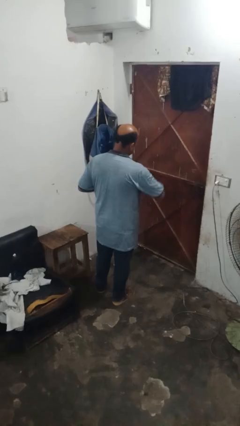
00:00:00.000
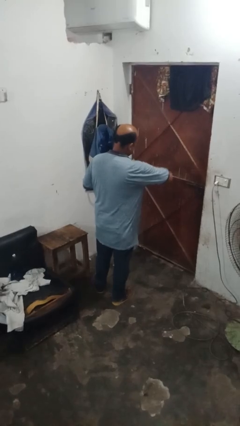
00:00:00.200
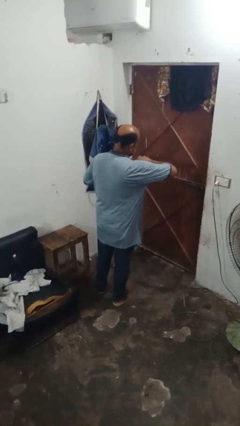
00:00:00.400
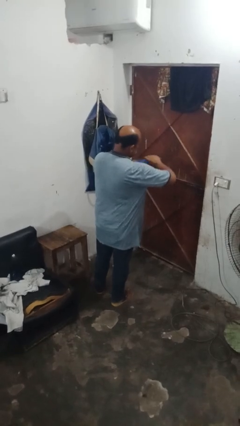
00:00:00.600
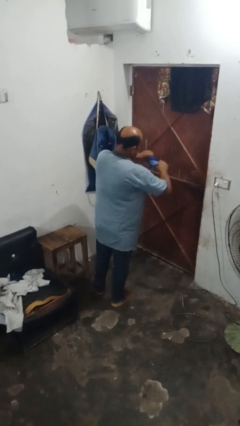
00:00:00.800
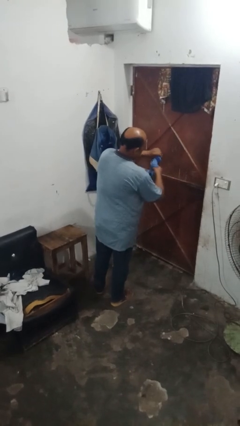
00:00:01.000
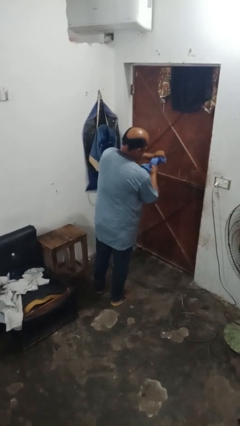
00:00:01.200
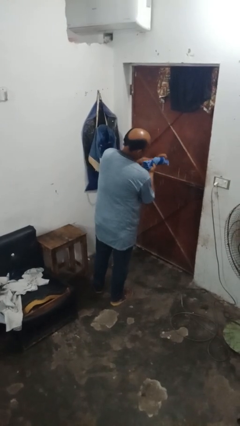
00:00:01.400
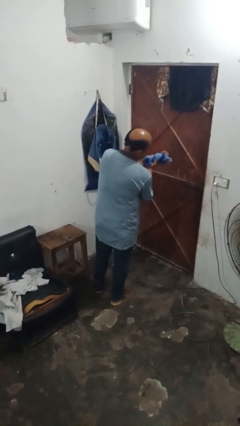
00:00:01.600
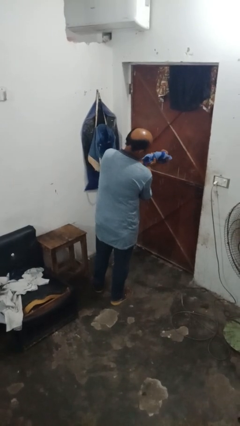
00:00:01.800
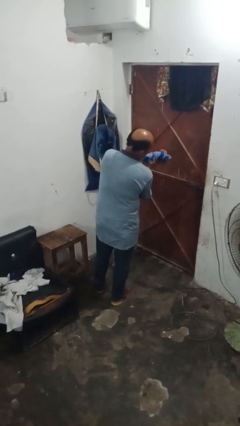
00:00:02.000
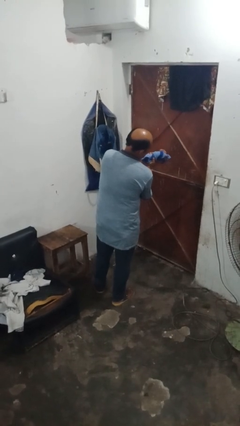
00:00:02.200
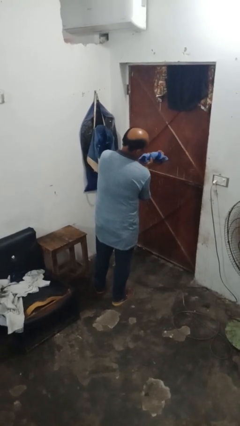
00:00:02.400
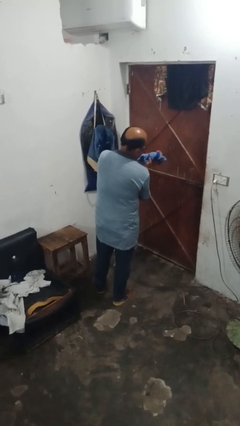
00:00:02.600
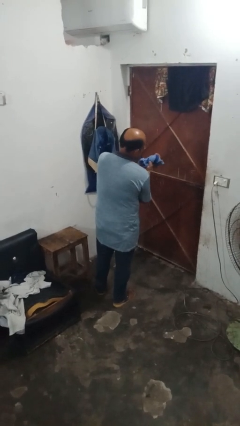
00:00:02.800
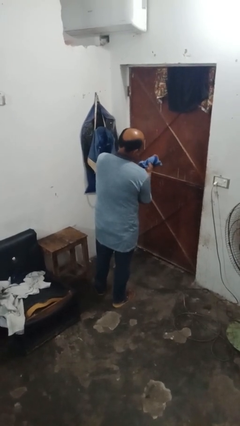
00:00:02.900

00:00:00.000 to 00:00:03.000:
person squeezes object

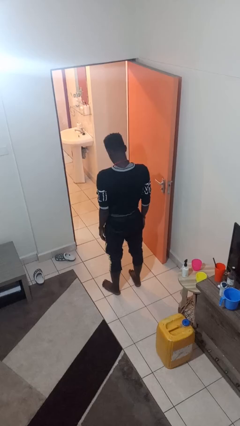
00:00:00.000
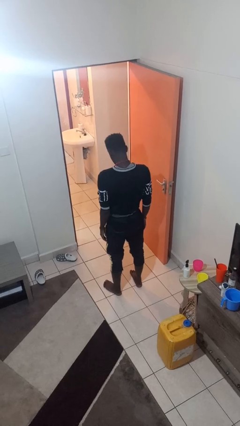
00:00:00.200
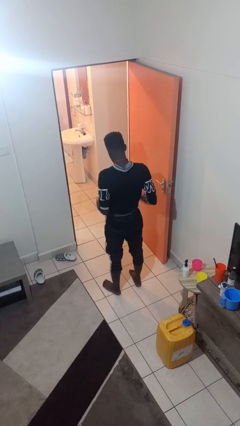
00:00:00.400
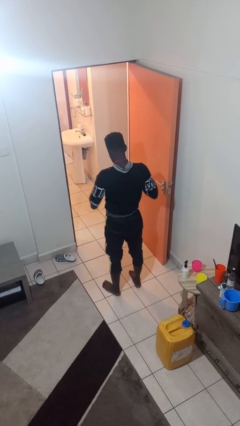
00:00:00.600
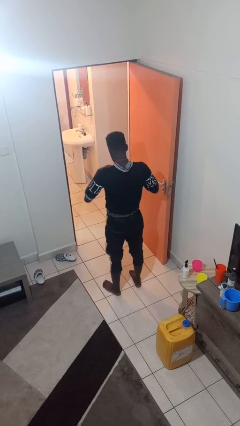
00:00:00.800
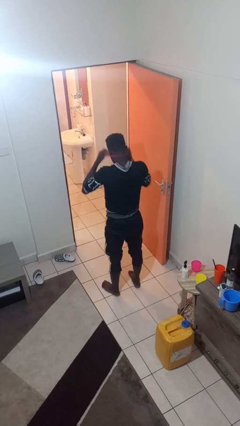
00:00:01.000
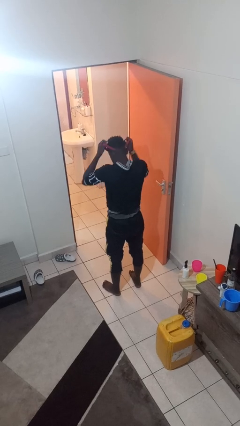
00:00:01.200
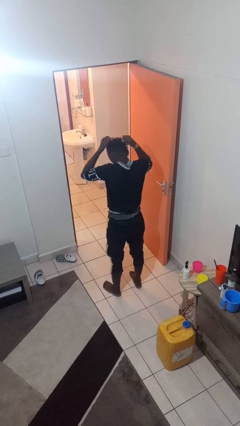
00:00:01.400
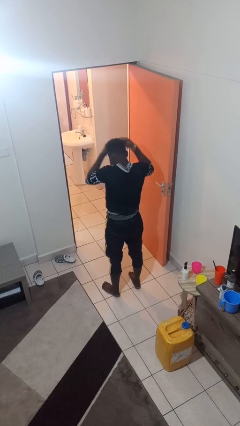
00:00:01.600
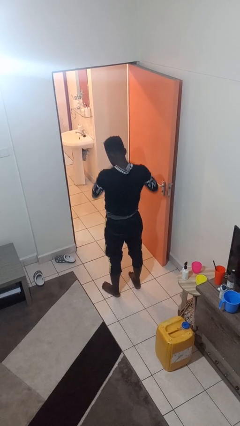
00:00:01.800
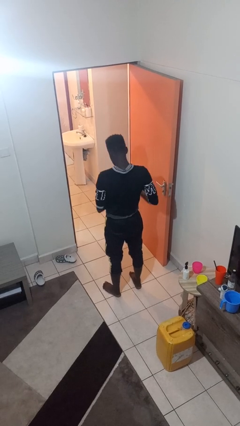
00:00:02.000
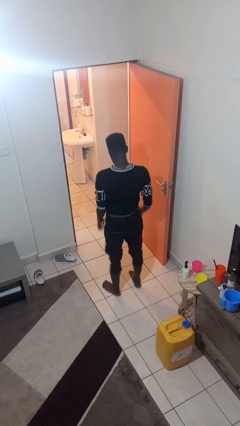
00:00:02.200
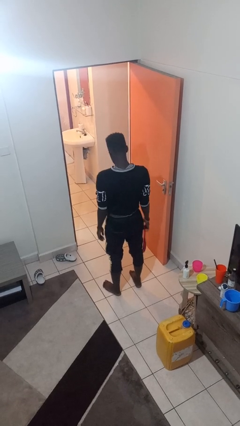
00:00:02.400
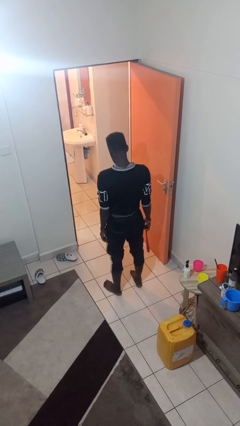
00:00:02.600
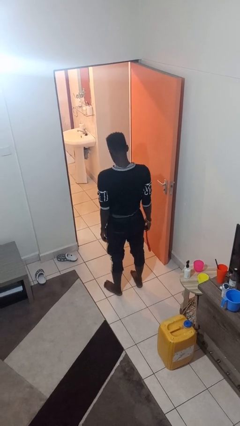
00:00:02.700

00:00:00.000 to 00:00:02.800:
person takes off necklace

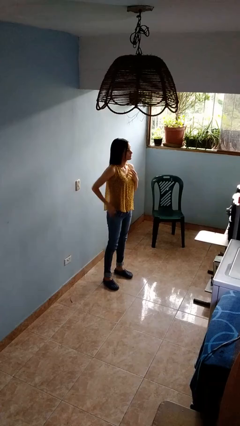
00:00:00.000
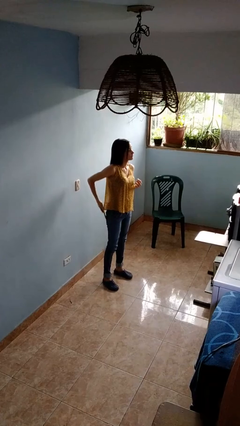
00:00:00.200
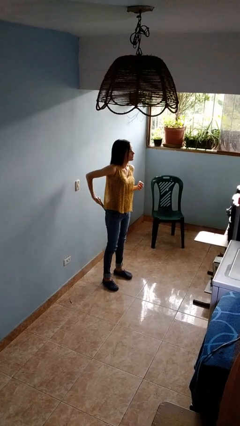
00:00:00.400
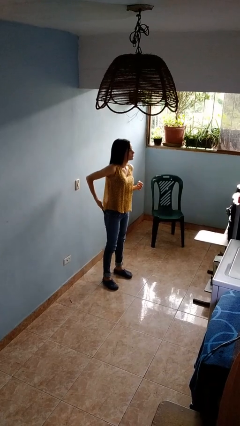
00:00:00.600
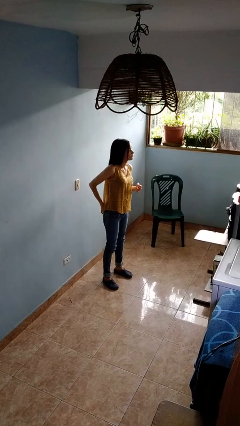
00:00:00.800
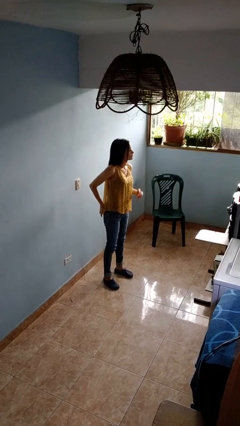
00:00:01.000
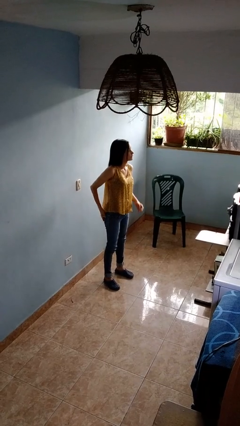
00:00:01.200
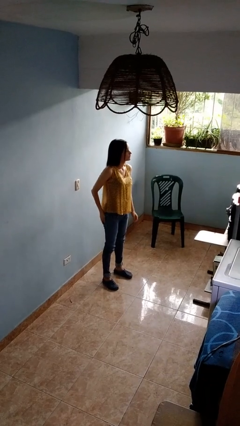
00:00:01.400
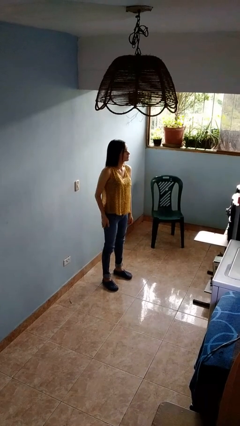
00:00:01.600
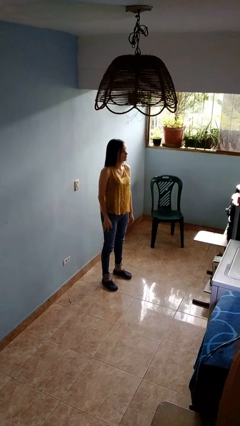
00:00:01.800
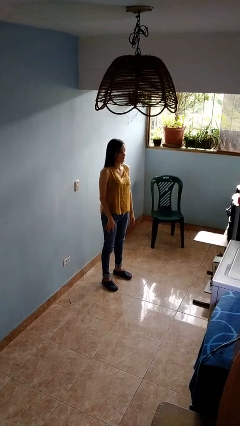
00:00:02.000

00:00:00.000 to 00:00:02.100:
person puts phone into pocket

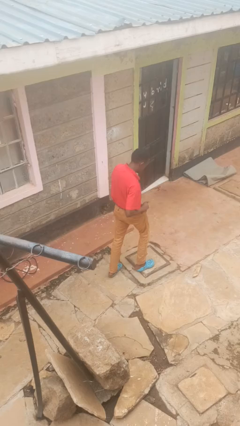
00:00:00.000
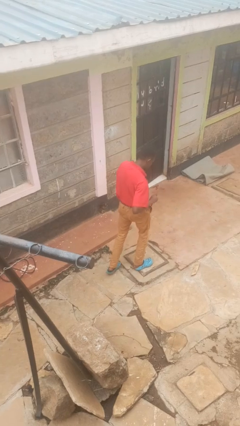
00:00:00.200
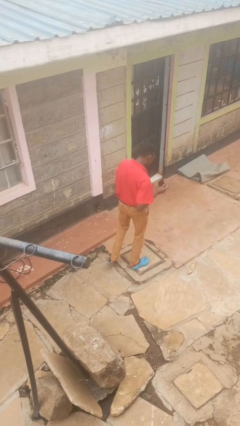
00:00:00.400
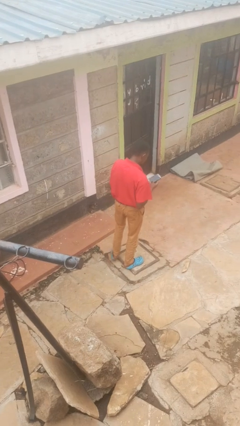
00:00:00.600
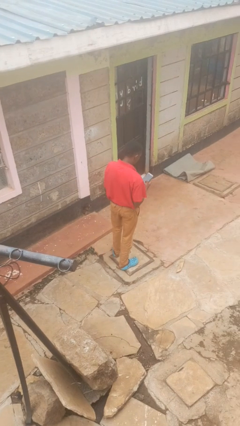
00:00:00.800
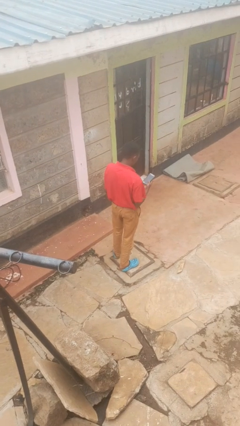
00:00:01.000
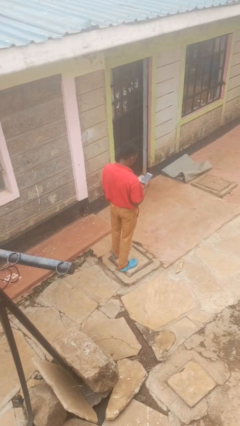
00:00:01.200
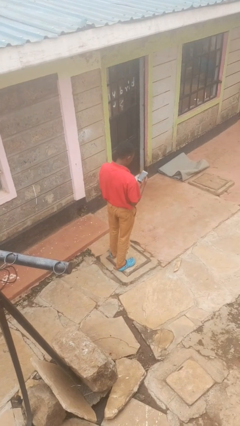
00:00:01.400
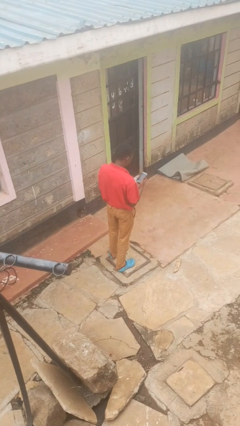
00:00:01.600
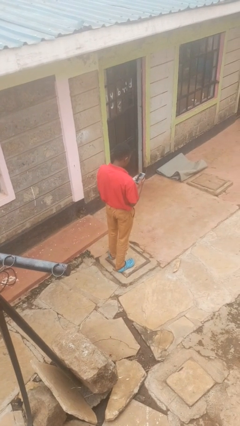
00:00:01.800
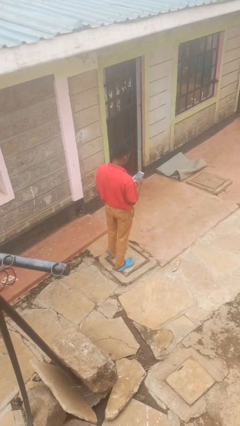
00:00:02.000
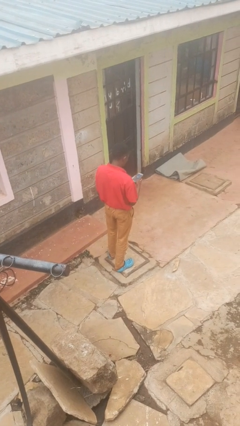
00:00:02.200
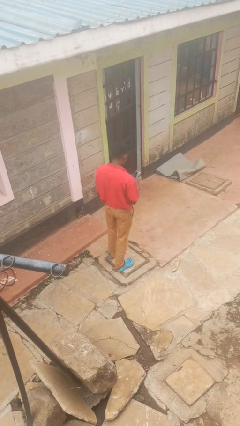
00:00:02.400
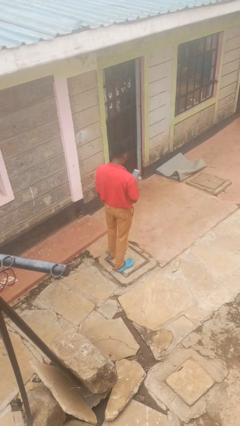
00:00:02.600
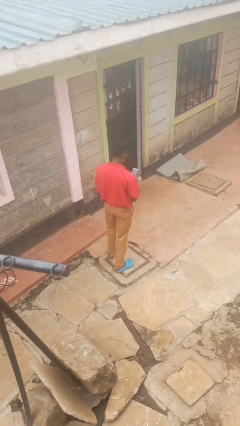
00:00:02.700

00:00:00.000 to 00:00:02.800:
person takes phone from pocket

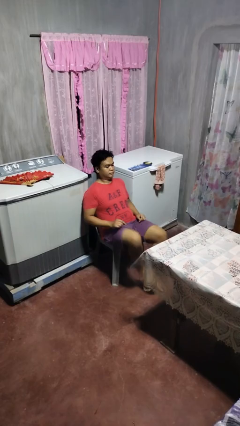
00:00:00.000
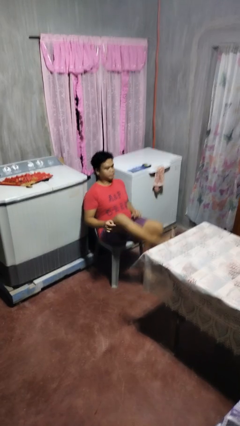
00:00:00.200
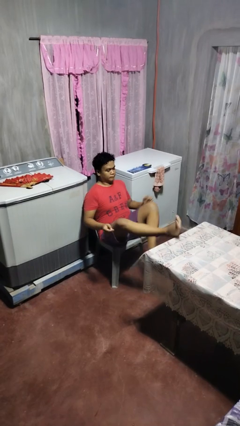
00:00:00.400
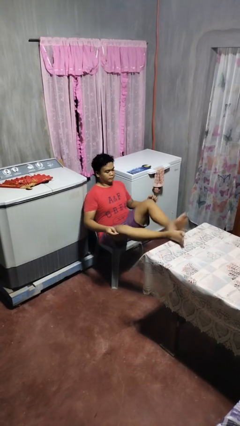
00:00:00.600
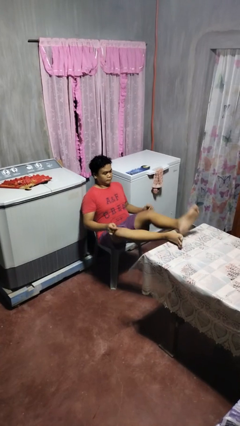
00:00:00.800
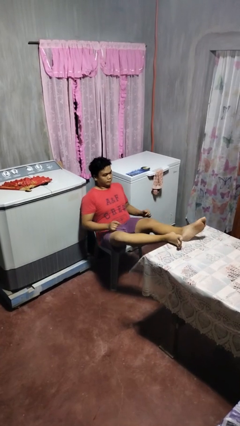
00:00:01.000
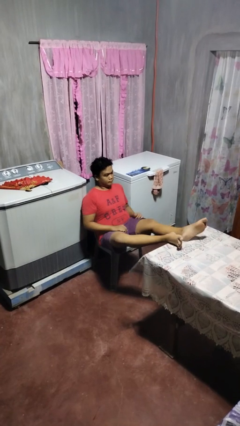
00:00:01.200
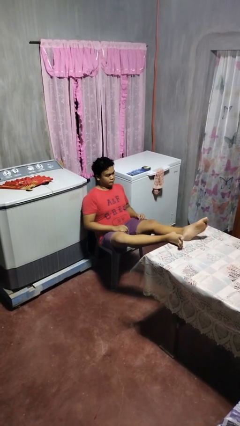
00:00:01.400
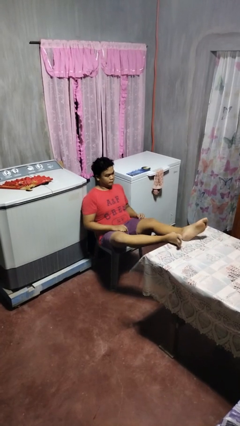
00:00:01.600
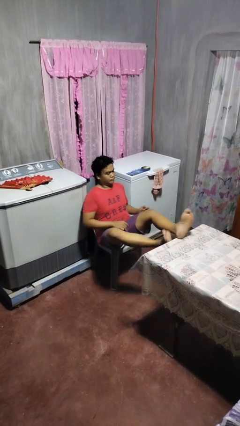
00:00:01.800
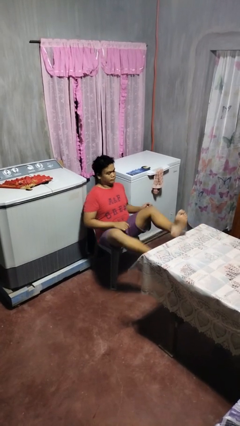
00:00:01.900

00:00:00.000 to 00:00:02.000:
person puts feet up

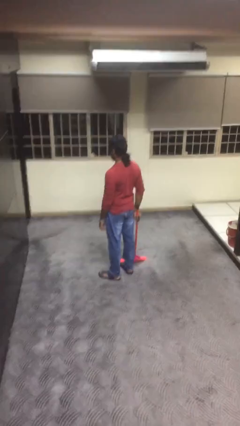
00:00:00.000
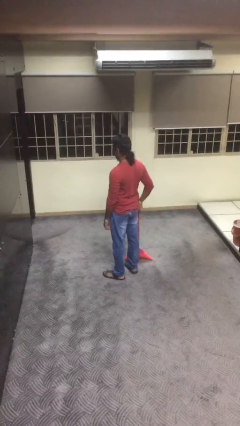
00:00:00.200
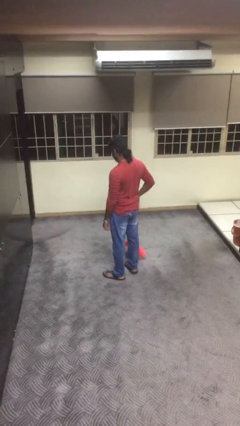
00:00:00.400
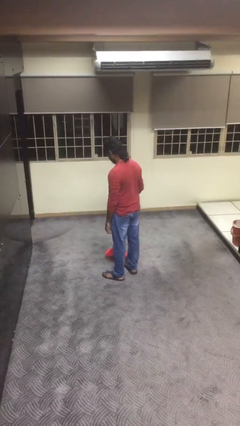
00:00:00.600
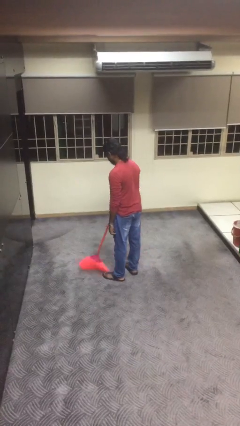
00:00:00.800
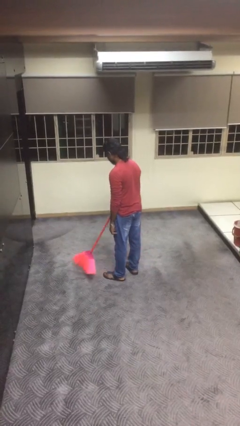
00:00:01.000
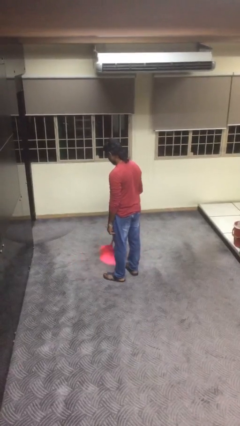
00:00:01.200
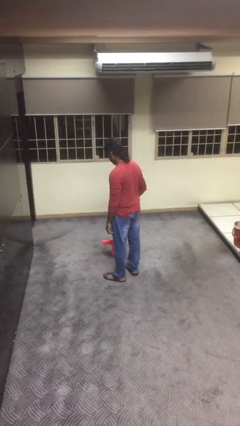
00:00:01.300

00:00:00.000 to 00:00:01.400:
person sweeps floor

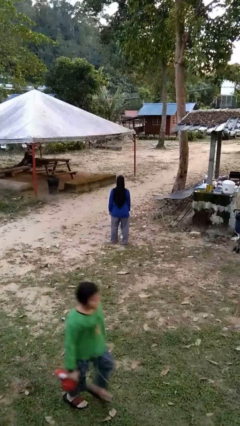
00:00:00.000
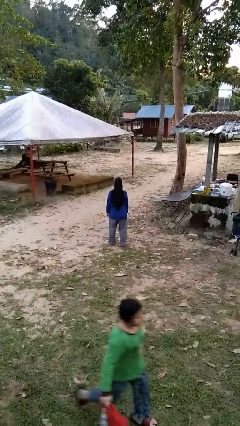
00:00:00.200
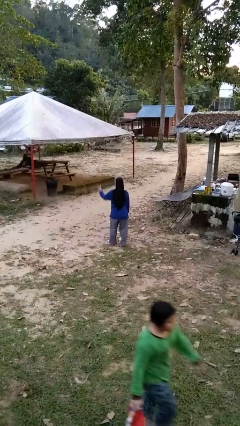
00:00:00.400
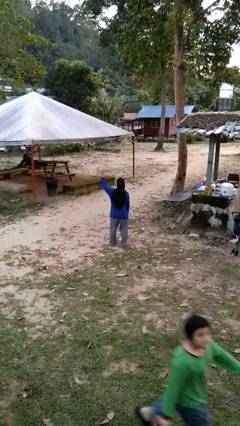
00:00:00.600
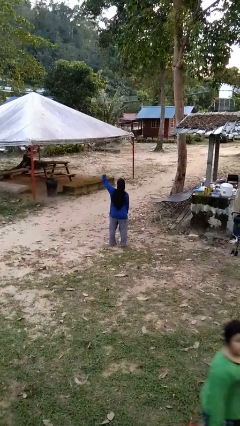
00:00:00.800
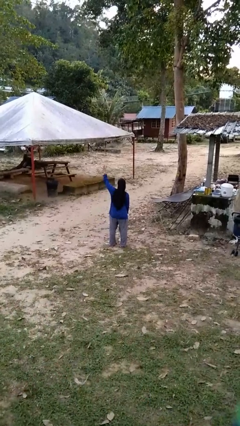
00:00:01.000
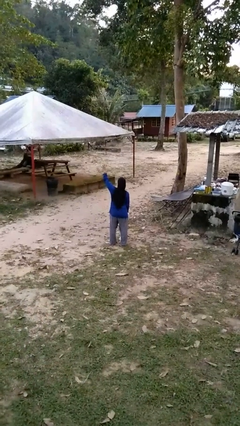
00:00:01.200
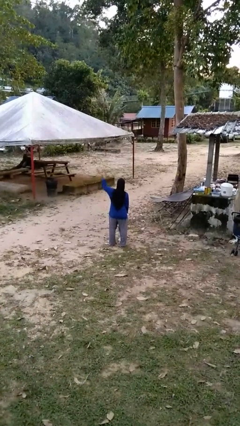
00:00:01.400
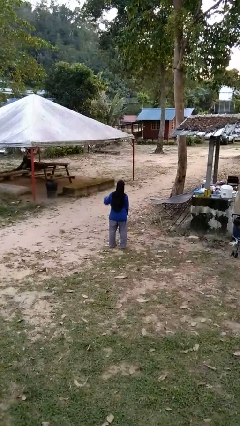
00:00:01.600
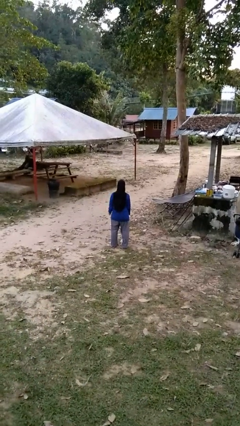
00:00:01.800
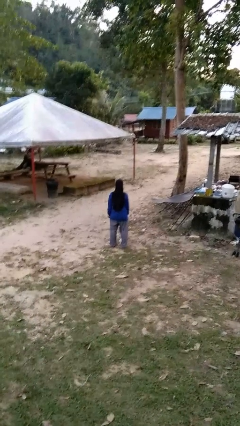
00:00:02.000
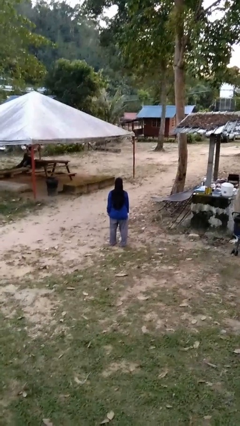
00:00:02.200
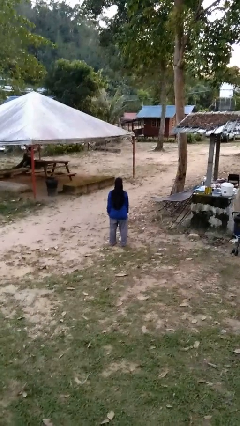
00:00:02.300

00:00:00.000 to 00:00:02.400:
person gestures number four

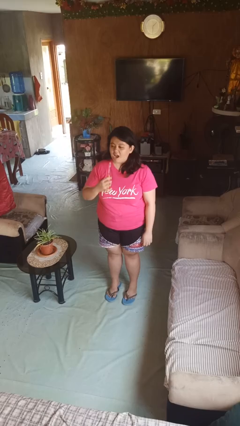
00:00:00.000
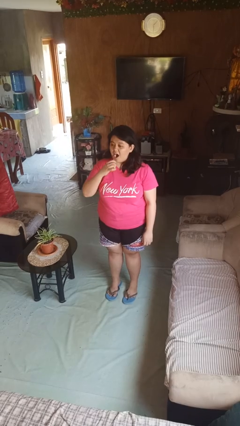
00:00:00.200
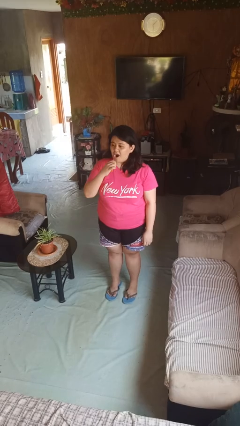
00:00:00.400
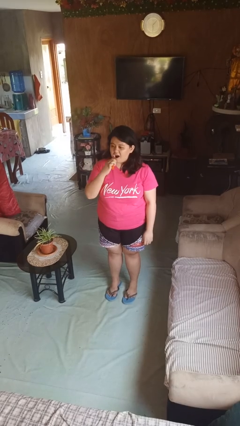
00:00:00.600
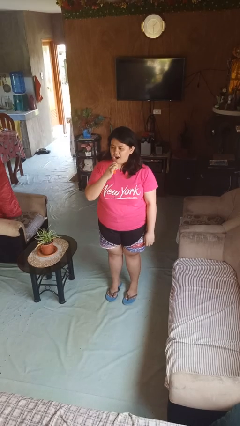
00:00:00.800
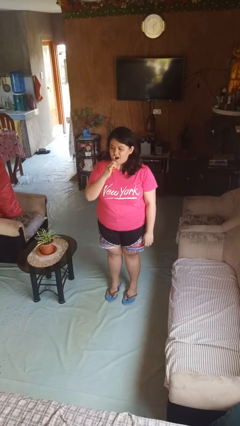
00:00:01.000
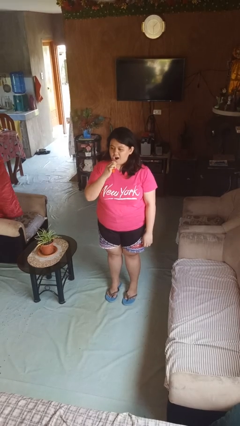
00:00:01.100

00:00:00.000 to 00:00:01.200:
person brushes teeth
